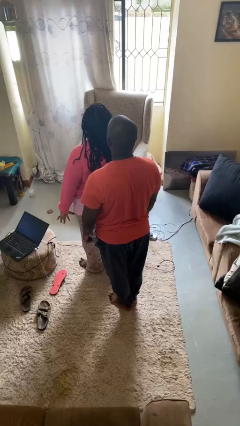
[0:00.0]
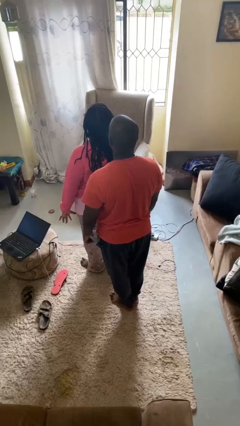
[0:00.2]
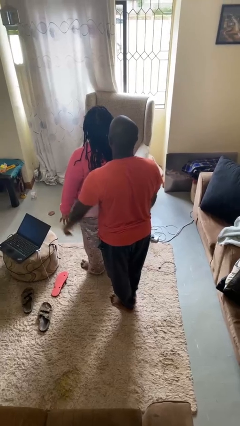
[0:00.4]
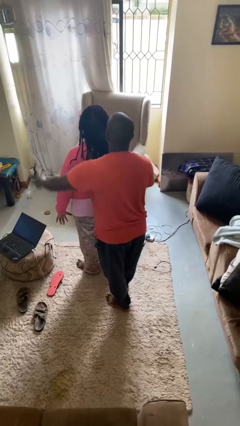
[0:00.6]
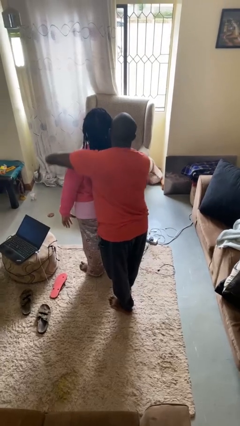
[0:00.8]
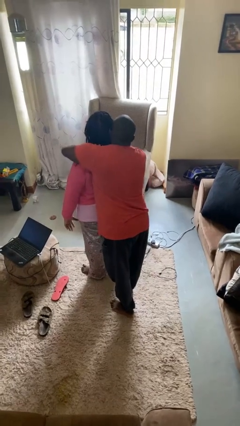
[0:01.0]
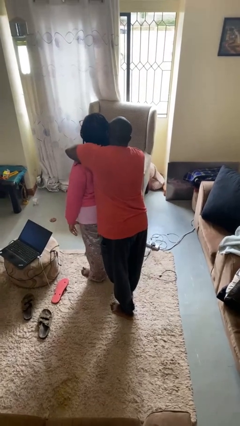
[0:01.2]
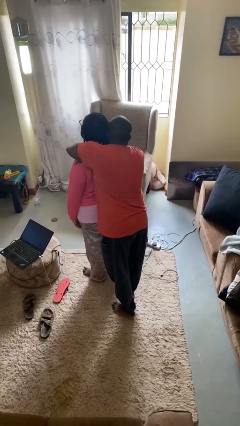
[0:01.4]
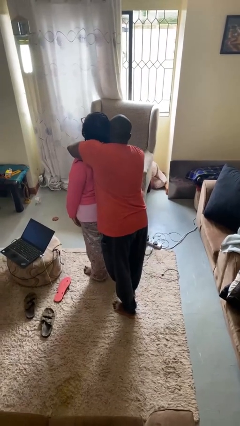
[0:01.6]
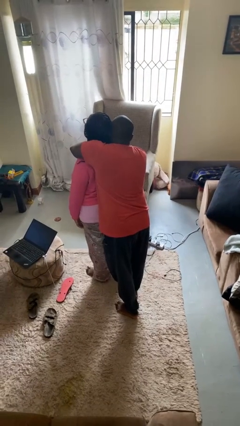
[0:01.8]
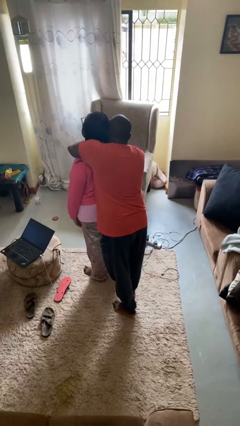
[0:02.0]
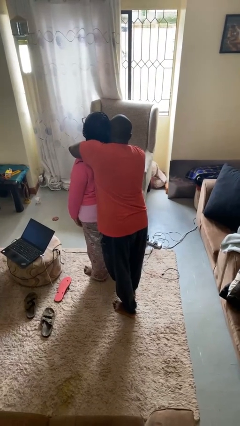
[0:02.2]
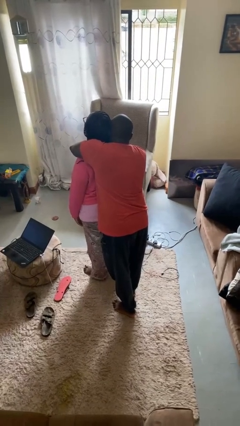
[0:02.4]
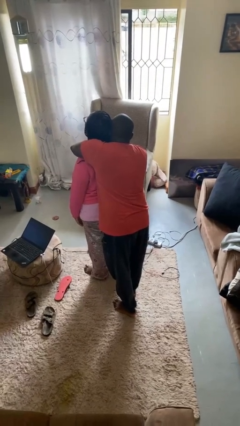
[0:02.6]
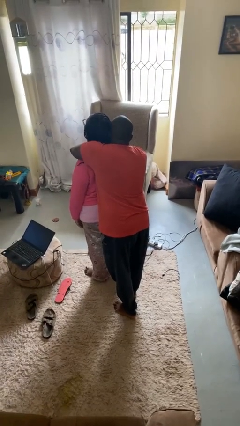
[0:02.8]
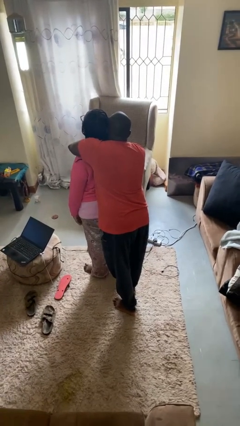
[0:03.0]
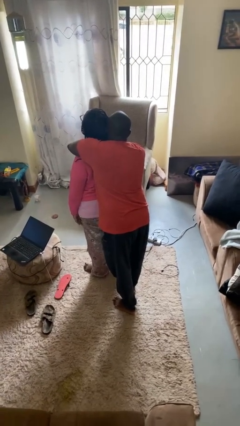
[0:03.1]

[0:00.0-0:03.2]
person hugs person from behind

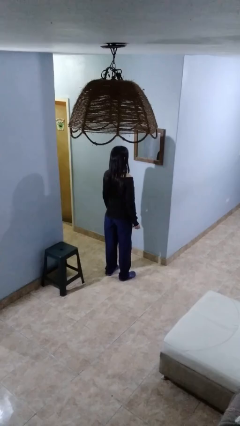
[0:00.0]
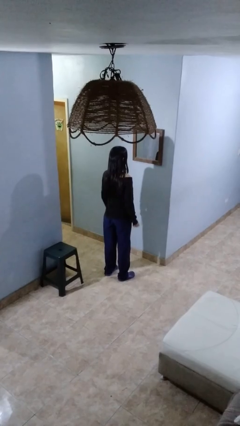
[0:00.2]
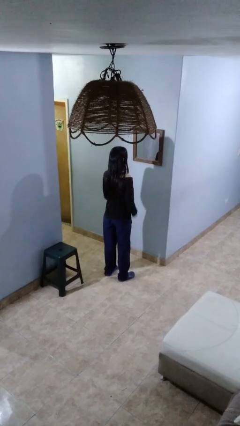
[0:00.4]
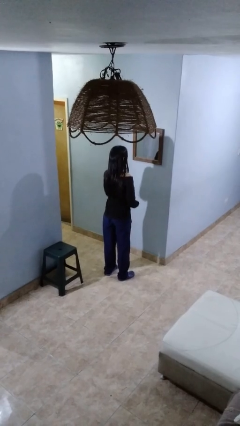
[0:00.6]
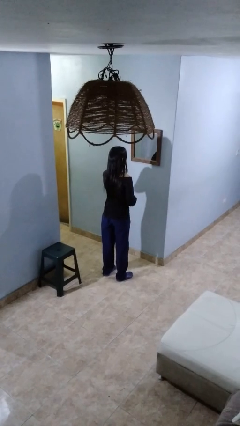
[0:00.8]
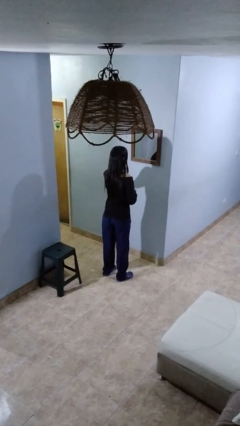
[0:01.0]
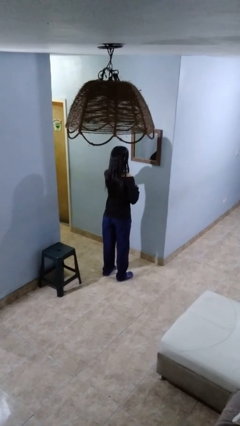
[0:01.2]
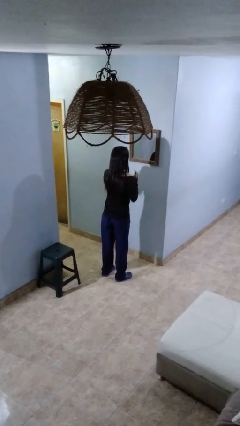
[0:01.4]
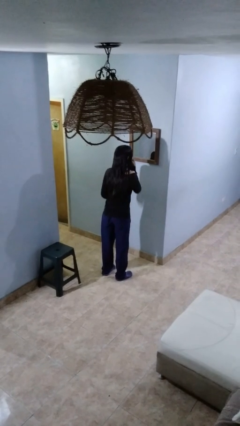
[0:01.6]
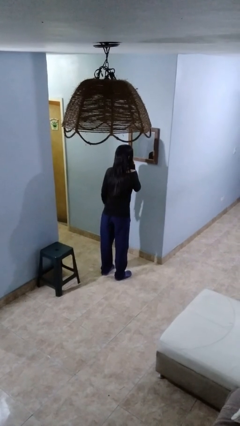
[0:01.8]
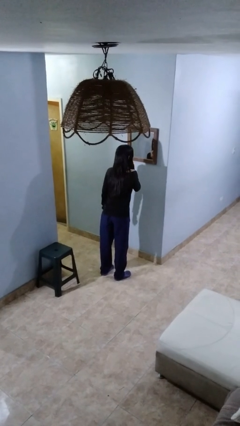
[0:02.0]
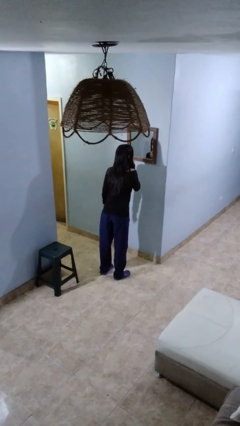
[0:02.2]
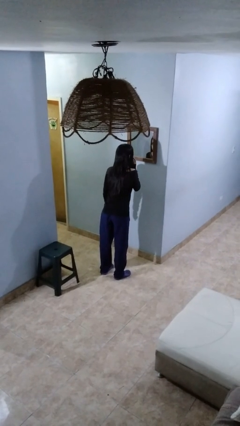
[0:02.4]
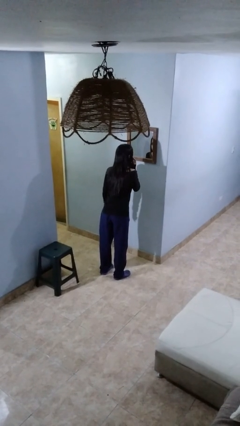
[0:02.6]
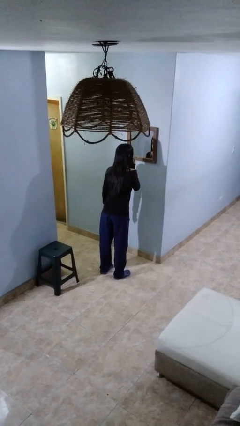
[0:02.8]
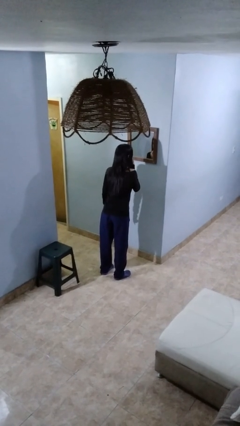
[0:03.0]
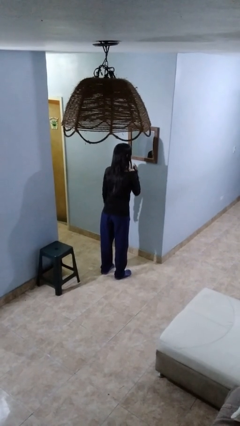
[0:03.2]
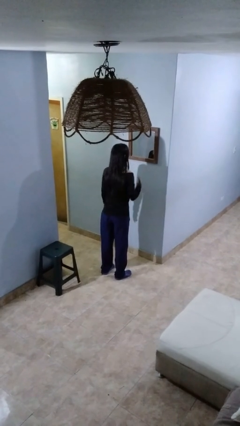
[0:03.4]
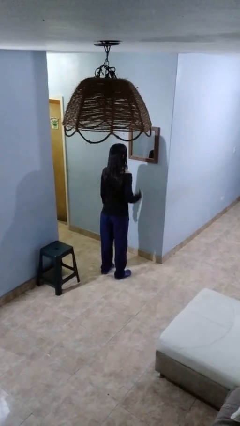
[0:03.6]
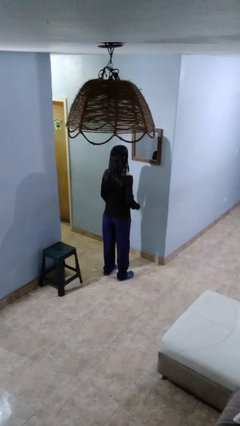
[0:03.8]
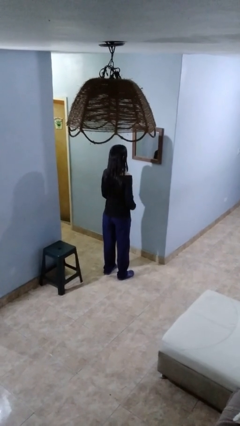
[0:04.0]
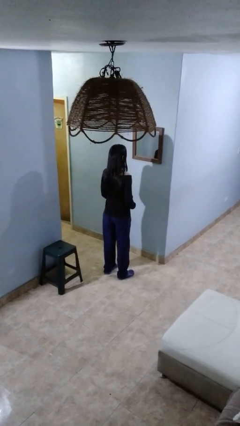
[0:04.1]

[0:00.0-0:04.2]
person applies lip makeup

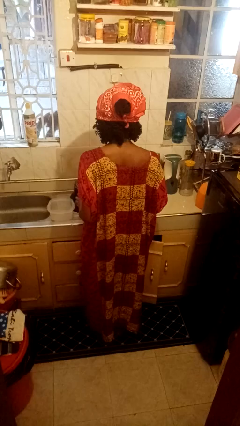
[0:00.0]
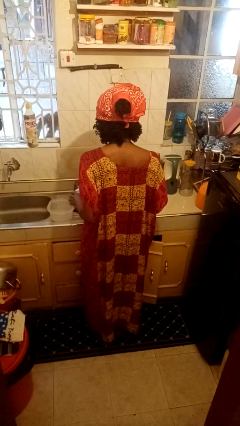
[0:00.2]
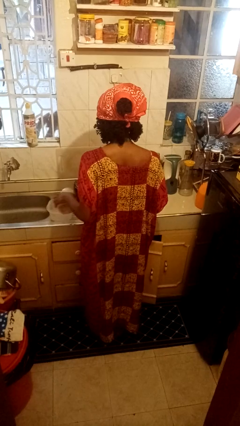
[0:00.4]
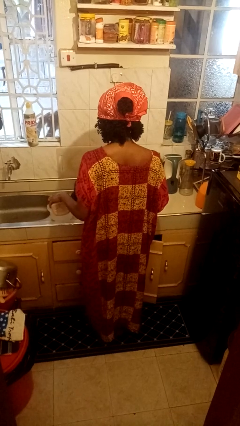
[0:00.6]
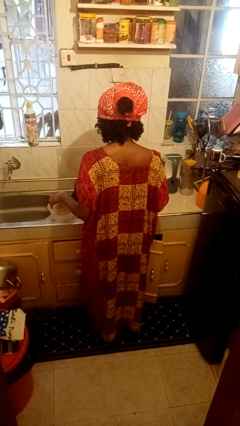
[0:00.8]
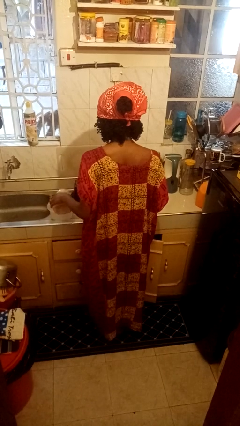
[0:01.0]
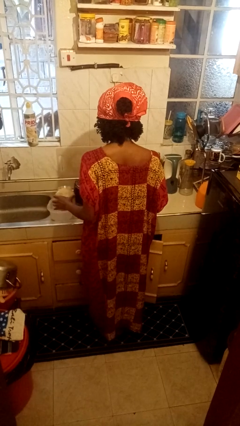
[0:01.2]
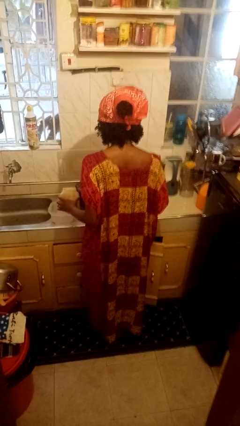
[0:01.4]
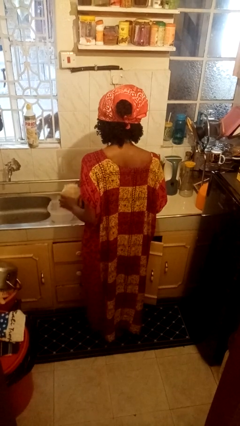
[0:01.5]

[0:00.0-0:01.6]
person pours into bowl

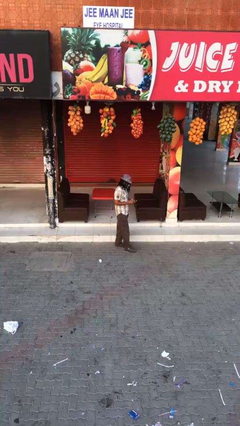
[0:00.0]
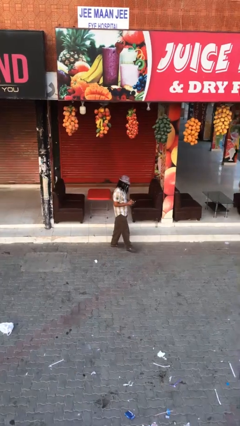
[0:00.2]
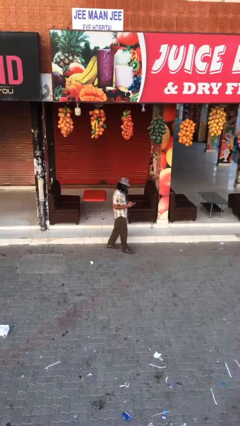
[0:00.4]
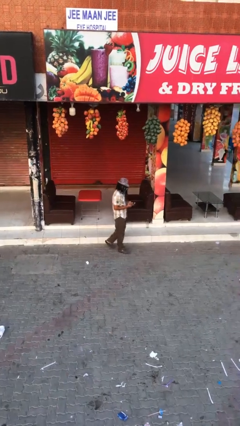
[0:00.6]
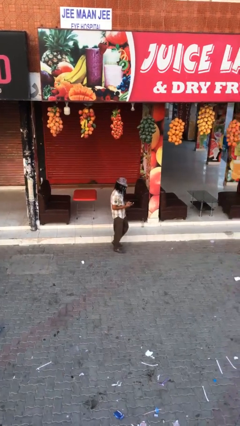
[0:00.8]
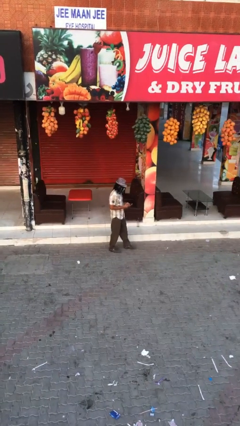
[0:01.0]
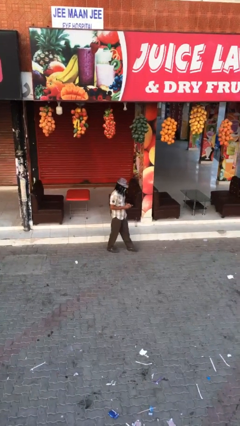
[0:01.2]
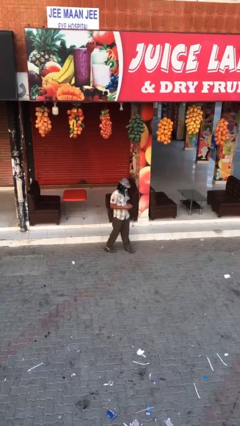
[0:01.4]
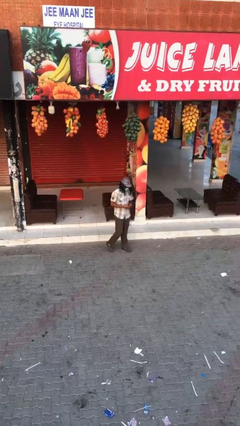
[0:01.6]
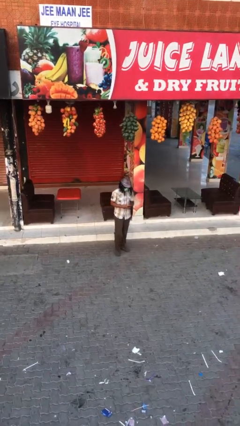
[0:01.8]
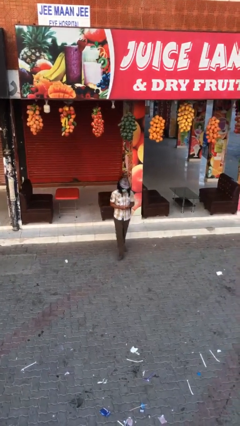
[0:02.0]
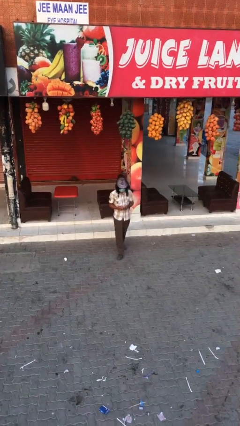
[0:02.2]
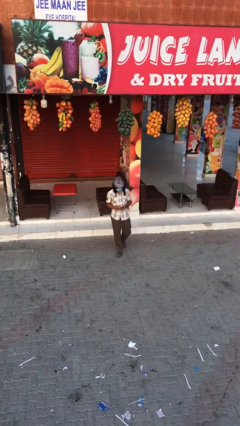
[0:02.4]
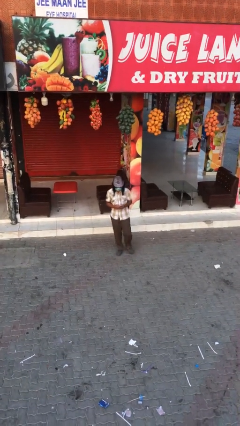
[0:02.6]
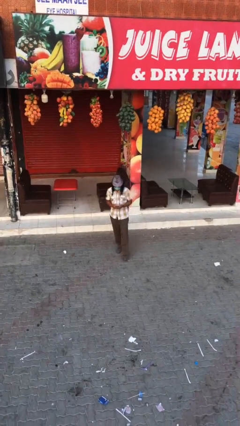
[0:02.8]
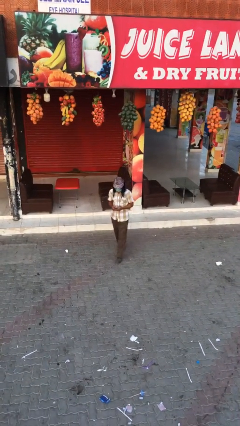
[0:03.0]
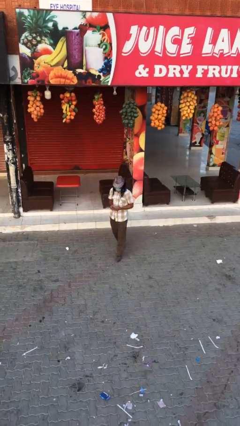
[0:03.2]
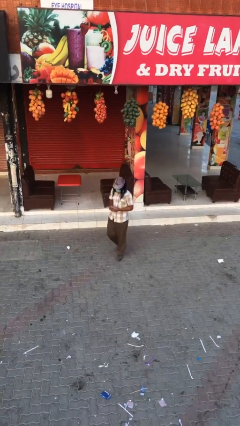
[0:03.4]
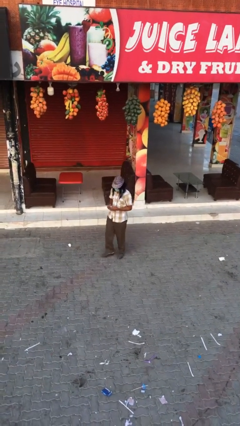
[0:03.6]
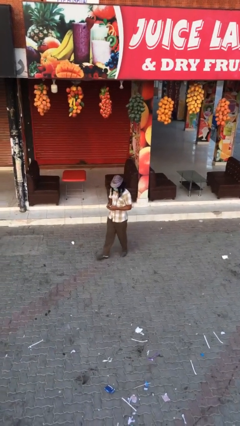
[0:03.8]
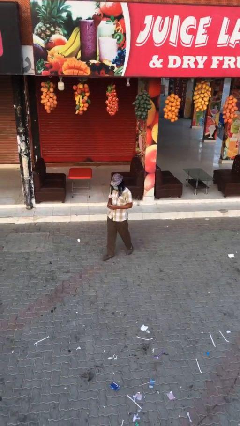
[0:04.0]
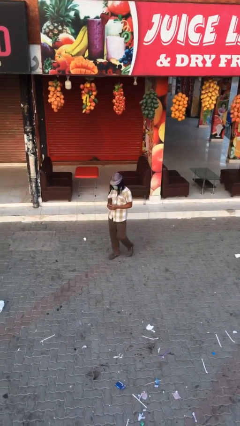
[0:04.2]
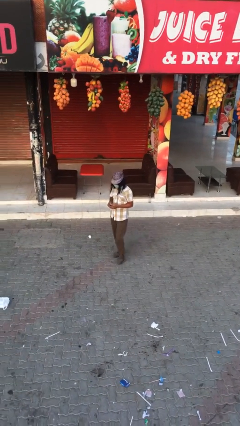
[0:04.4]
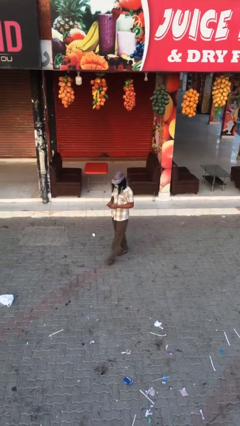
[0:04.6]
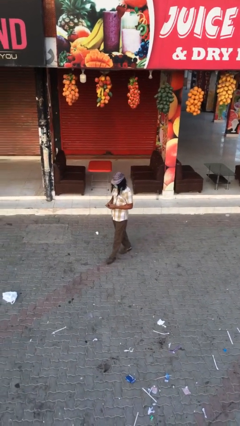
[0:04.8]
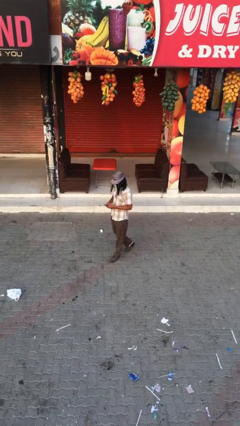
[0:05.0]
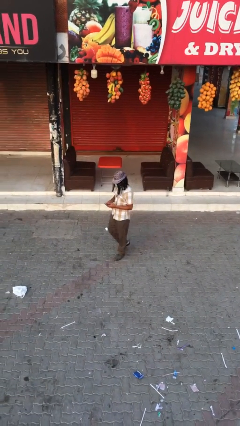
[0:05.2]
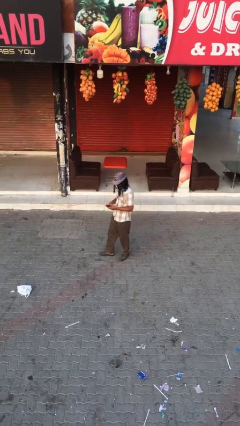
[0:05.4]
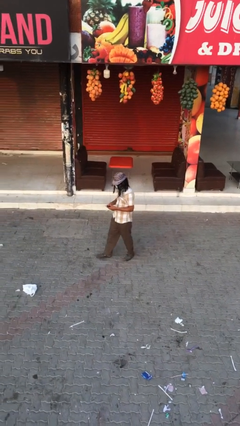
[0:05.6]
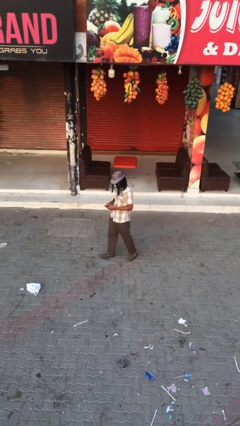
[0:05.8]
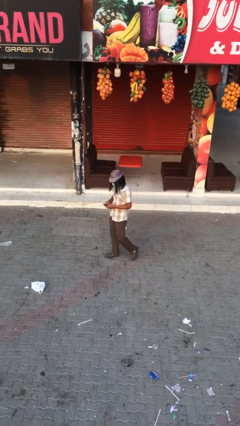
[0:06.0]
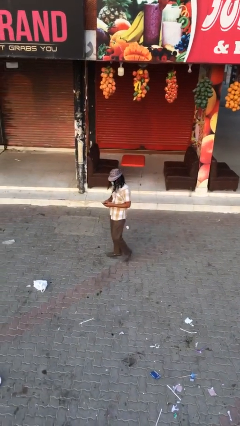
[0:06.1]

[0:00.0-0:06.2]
person texts on phone

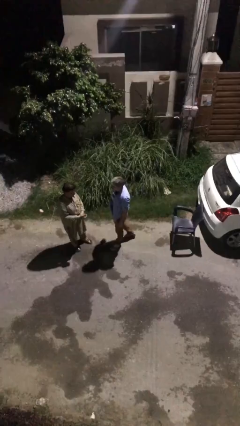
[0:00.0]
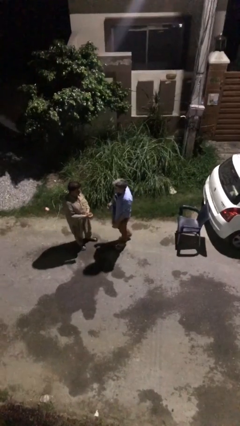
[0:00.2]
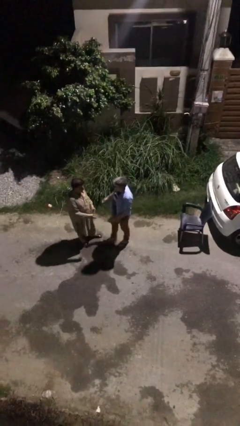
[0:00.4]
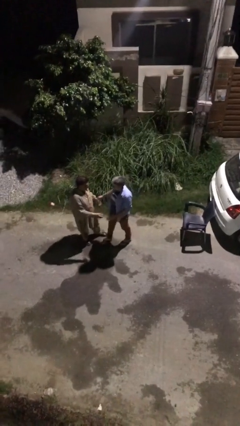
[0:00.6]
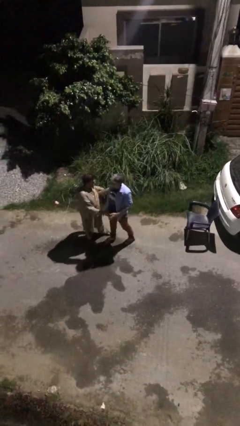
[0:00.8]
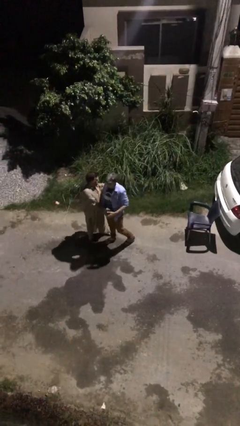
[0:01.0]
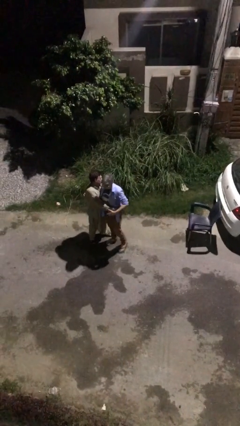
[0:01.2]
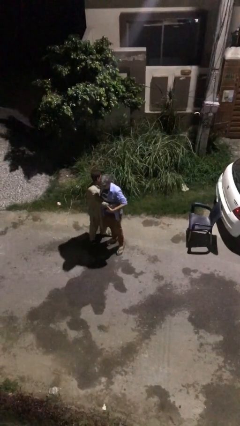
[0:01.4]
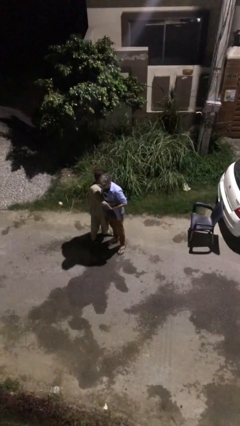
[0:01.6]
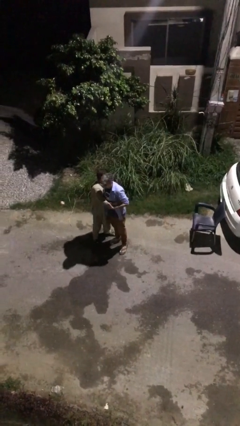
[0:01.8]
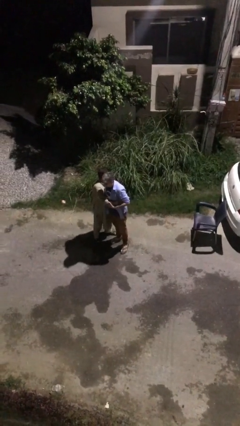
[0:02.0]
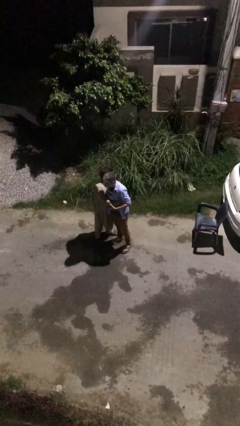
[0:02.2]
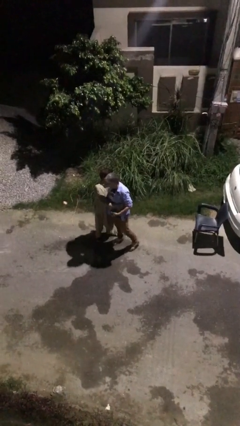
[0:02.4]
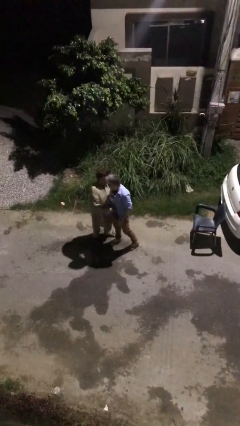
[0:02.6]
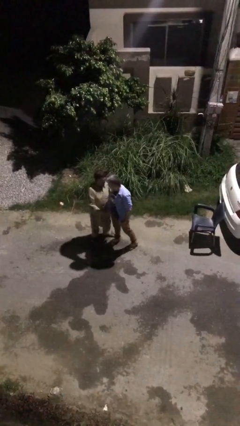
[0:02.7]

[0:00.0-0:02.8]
person embraces person
